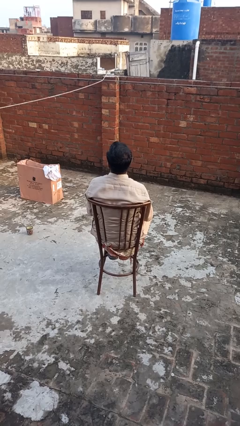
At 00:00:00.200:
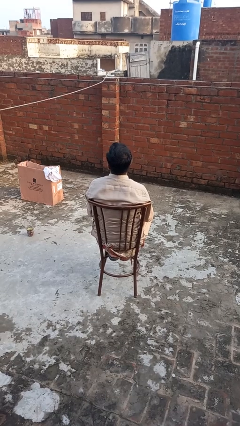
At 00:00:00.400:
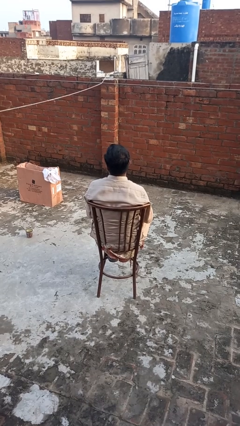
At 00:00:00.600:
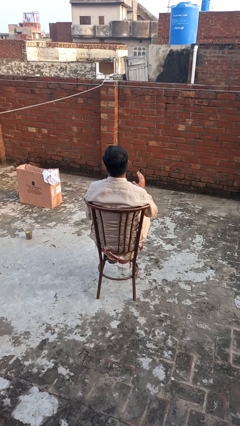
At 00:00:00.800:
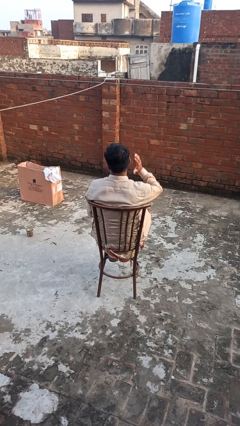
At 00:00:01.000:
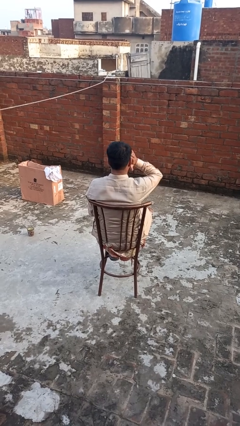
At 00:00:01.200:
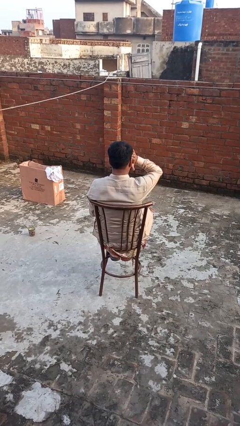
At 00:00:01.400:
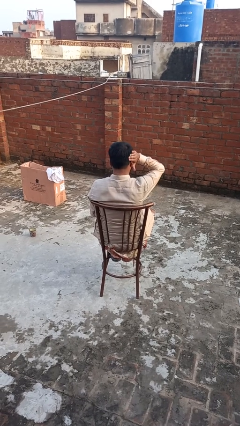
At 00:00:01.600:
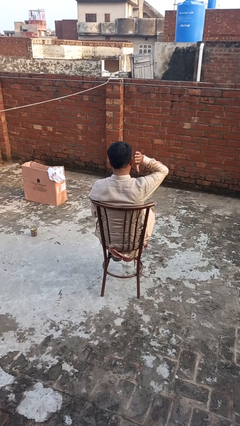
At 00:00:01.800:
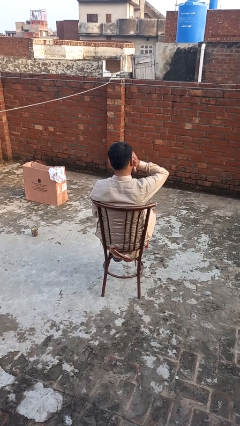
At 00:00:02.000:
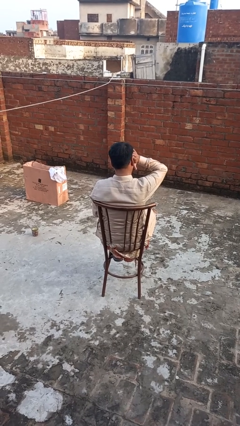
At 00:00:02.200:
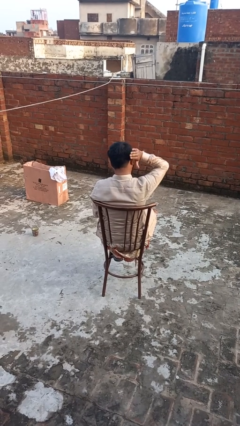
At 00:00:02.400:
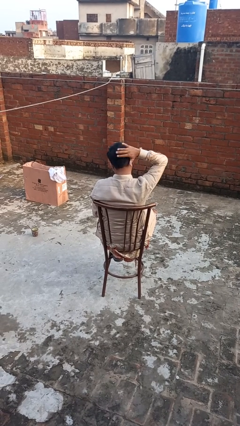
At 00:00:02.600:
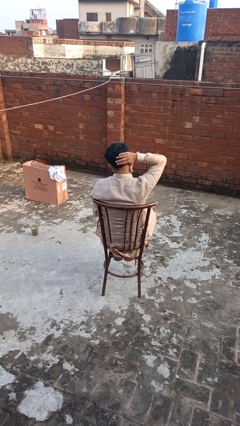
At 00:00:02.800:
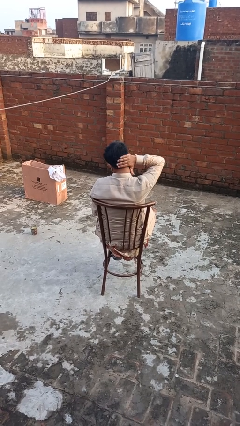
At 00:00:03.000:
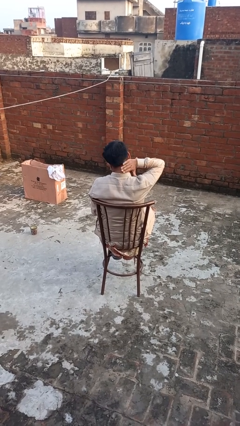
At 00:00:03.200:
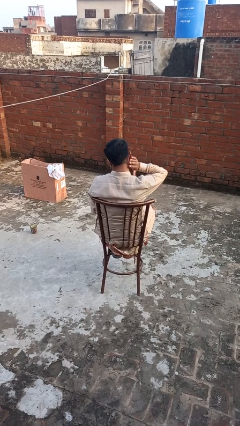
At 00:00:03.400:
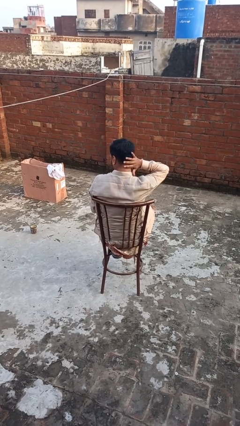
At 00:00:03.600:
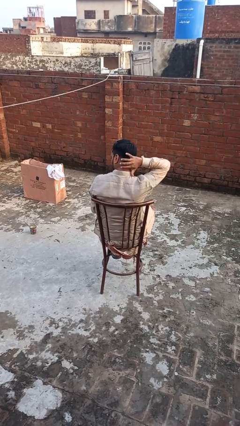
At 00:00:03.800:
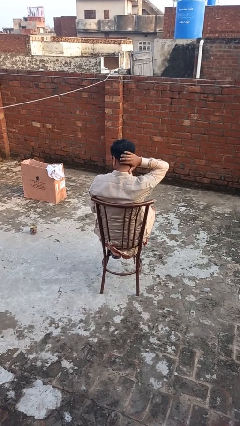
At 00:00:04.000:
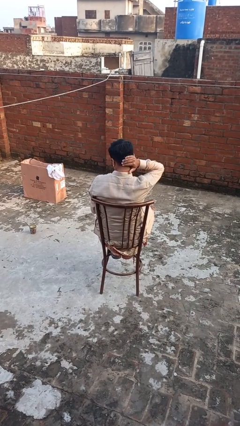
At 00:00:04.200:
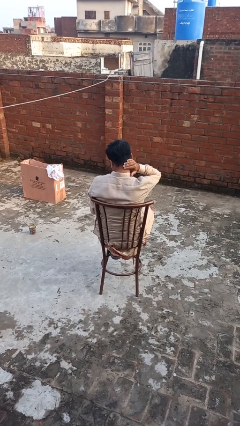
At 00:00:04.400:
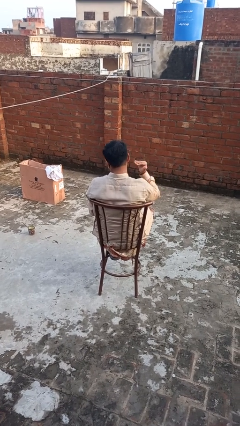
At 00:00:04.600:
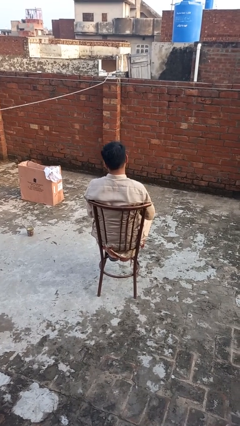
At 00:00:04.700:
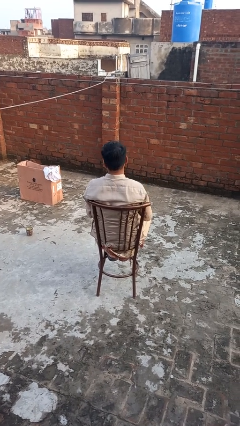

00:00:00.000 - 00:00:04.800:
person strokes hair

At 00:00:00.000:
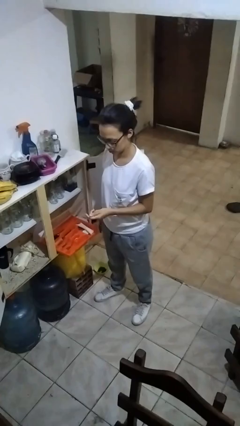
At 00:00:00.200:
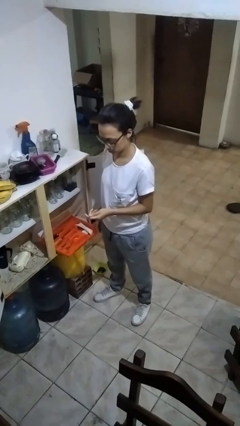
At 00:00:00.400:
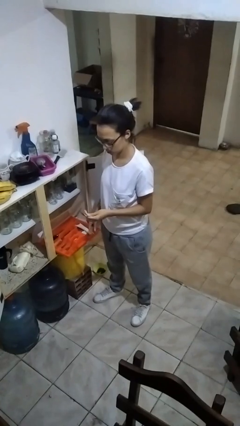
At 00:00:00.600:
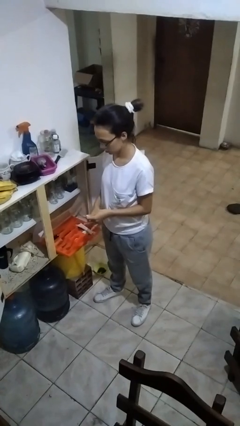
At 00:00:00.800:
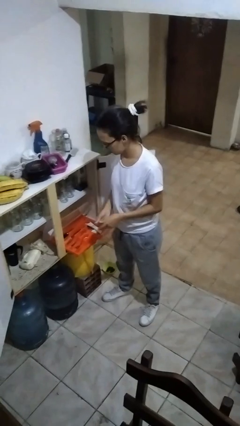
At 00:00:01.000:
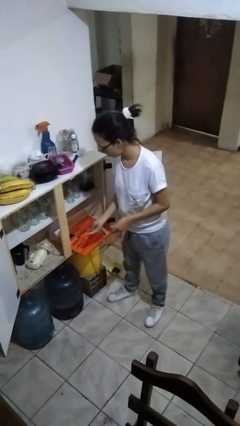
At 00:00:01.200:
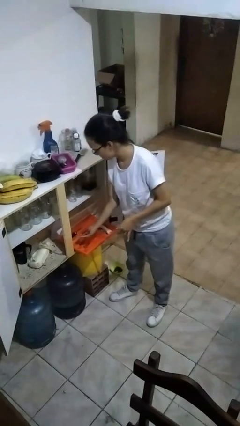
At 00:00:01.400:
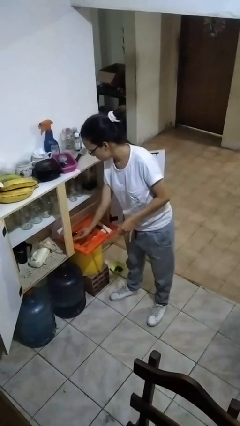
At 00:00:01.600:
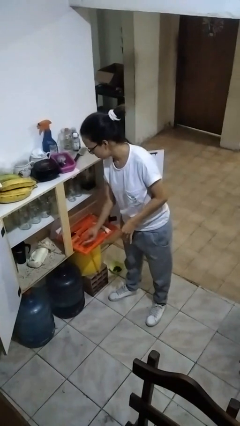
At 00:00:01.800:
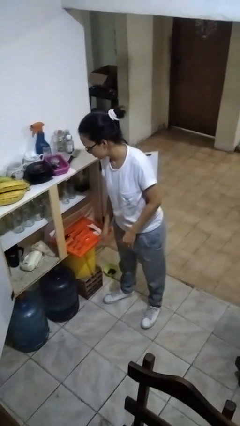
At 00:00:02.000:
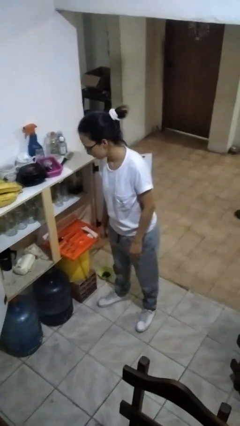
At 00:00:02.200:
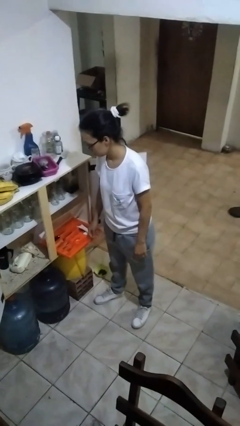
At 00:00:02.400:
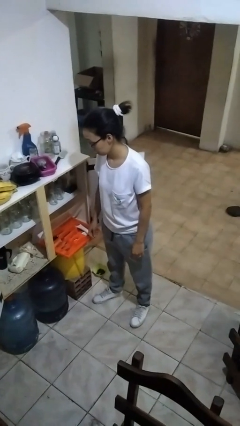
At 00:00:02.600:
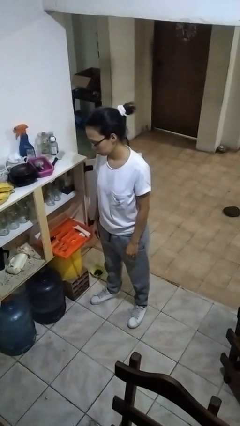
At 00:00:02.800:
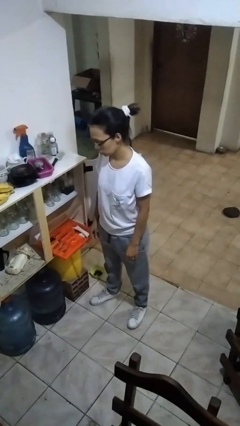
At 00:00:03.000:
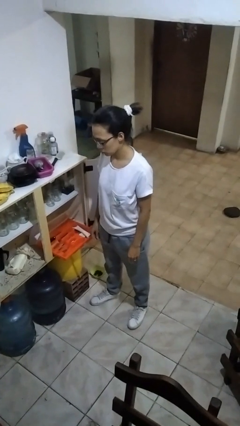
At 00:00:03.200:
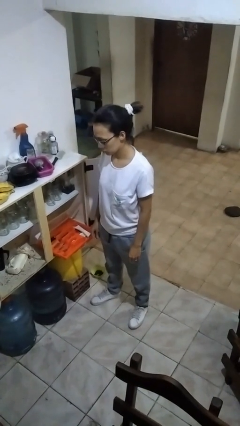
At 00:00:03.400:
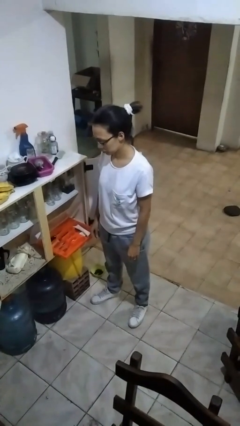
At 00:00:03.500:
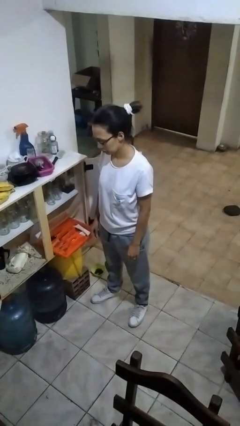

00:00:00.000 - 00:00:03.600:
person puts object into kitchen drawer

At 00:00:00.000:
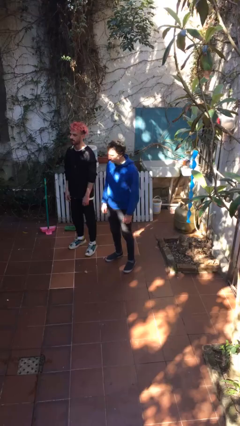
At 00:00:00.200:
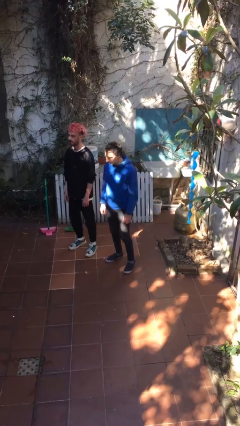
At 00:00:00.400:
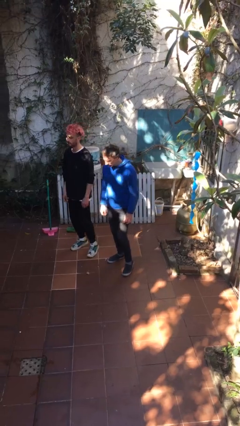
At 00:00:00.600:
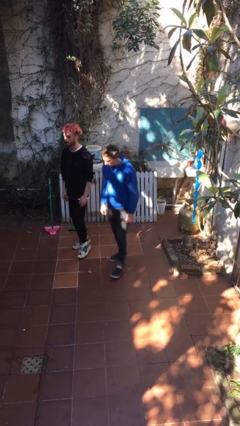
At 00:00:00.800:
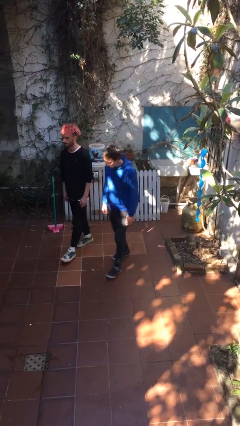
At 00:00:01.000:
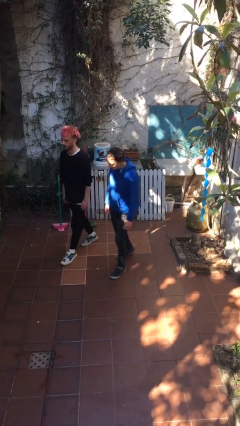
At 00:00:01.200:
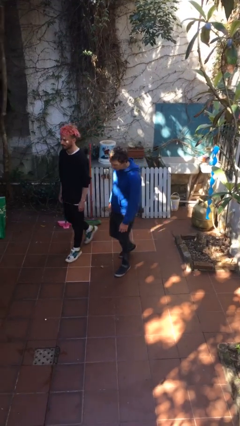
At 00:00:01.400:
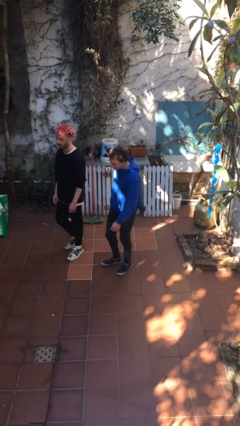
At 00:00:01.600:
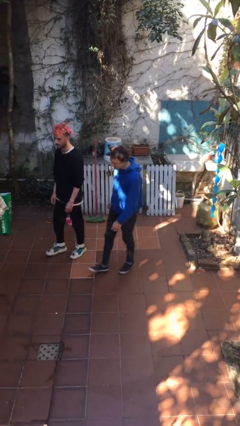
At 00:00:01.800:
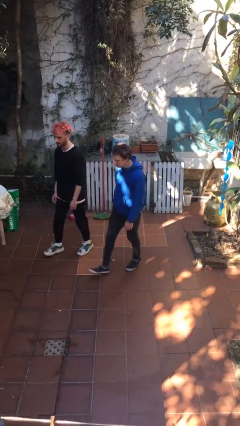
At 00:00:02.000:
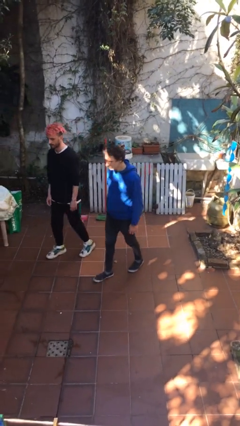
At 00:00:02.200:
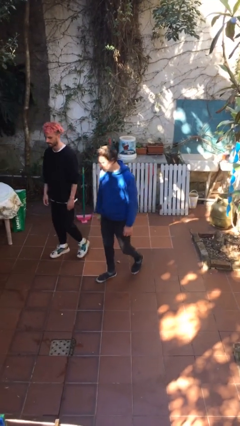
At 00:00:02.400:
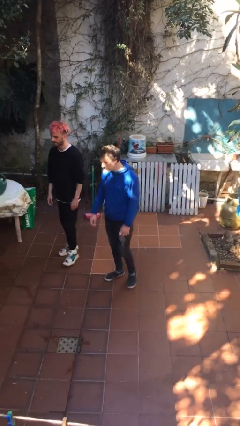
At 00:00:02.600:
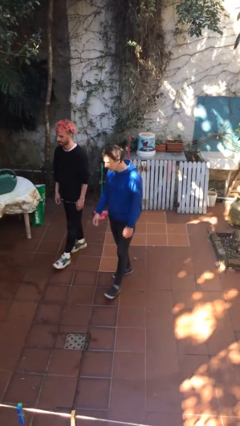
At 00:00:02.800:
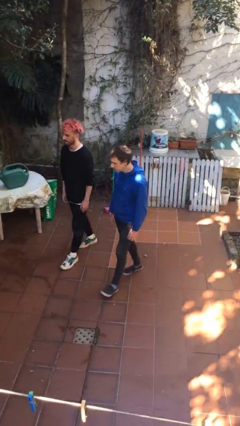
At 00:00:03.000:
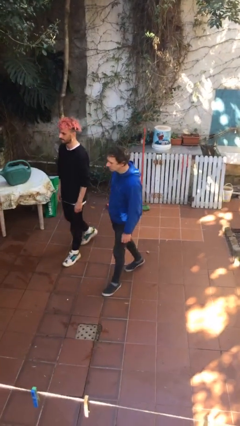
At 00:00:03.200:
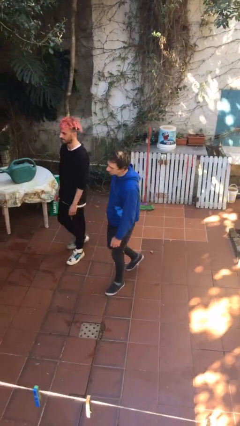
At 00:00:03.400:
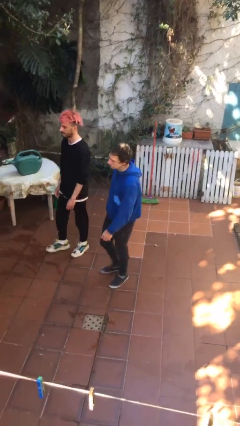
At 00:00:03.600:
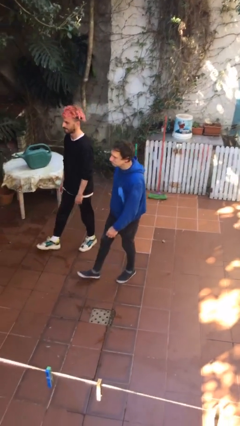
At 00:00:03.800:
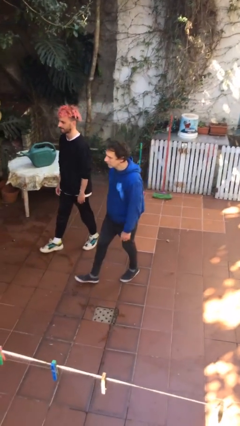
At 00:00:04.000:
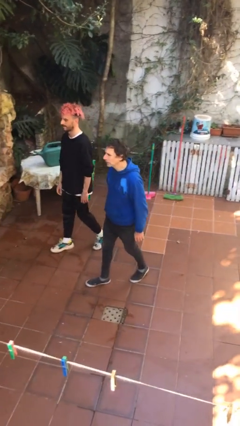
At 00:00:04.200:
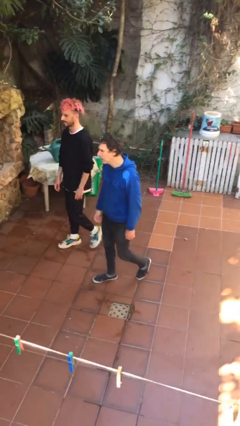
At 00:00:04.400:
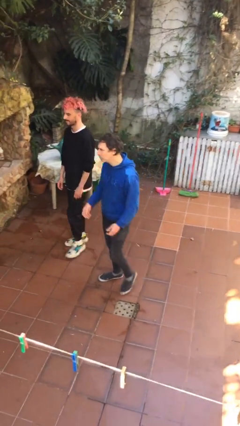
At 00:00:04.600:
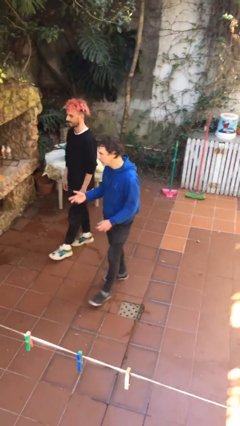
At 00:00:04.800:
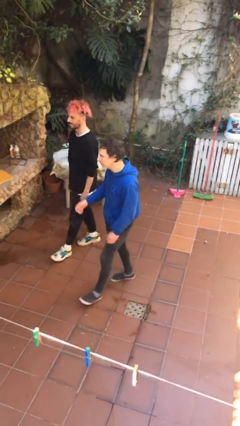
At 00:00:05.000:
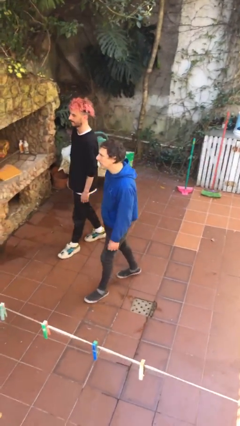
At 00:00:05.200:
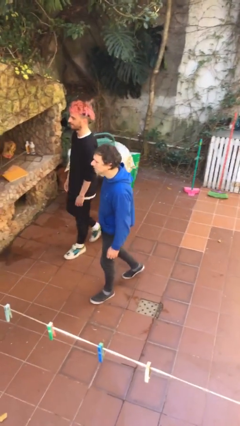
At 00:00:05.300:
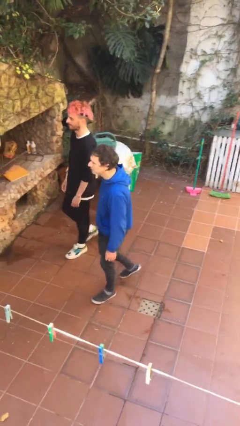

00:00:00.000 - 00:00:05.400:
person talks to person

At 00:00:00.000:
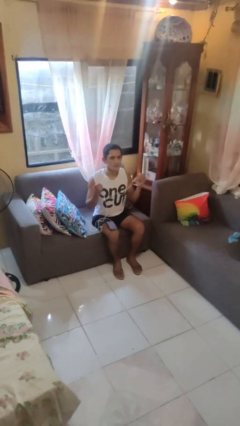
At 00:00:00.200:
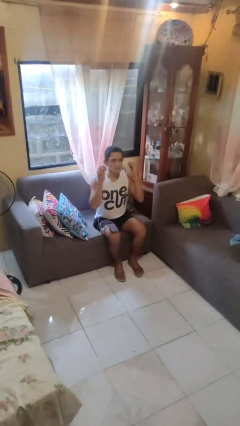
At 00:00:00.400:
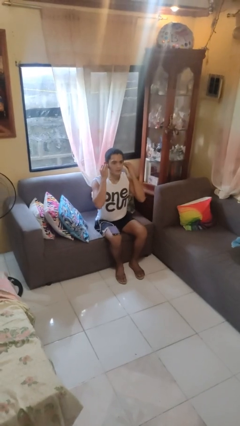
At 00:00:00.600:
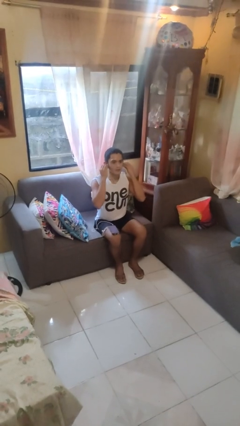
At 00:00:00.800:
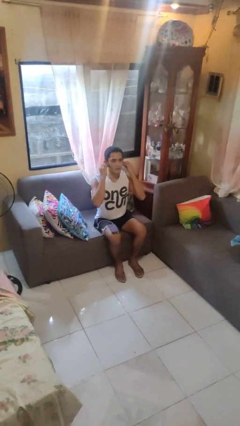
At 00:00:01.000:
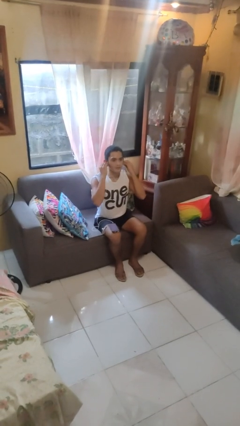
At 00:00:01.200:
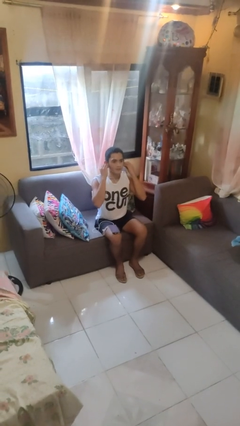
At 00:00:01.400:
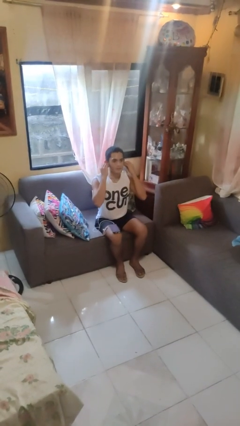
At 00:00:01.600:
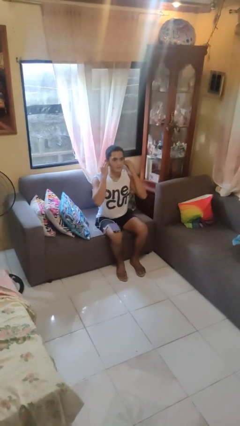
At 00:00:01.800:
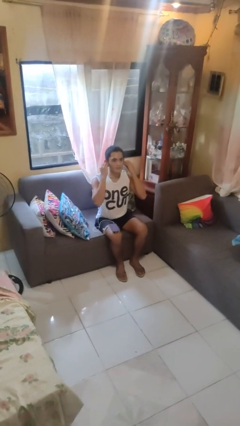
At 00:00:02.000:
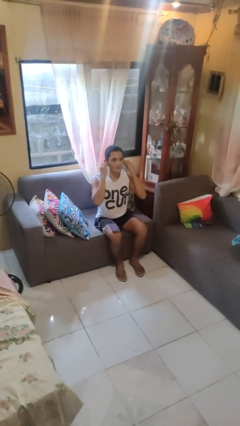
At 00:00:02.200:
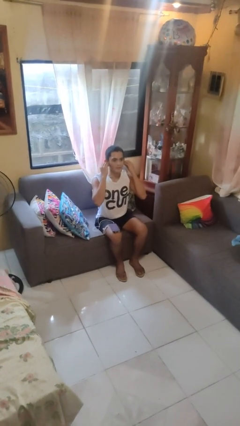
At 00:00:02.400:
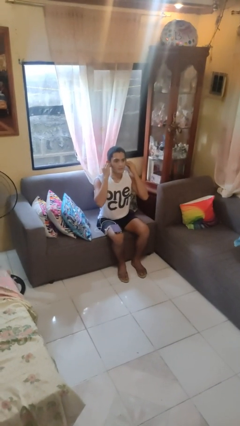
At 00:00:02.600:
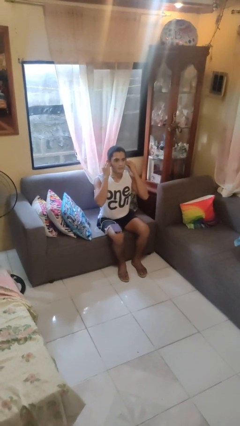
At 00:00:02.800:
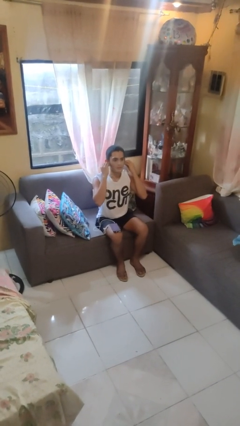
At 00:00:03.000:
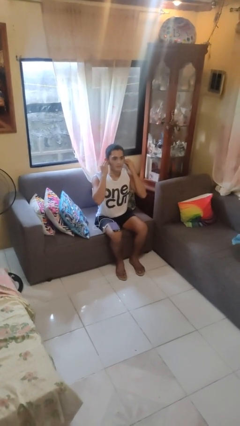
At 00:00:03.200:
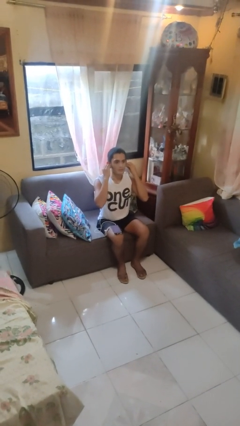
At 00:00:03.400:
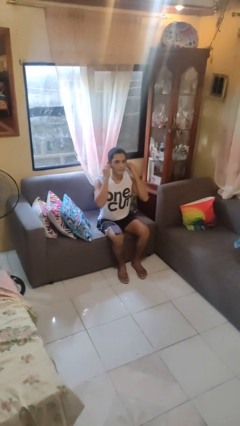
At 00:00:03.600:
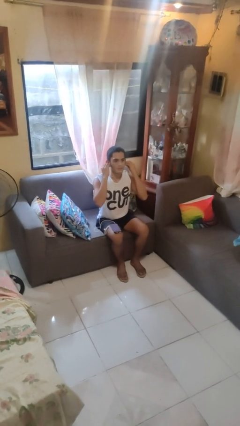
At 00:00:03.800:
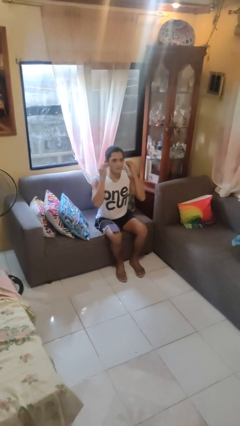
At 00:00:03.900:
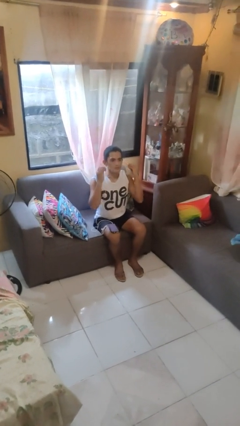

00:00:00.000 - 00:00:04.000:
person puts on headphones
